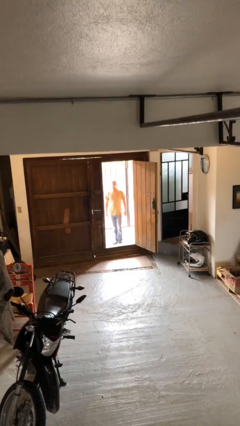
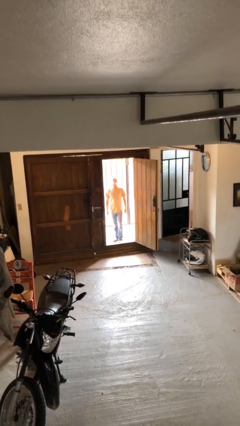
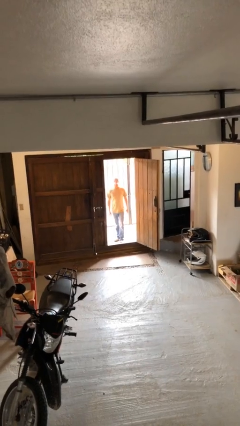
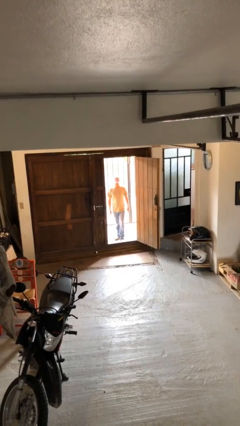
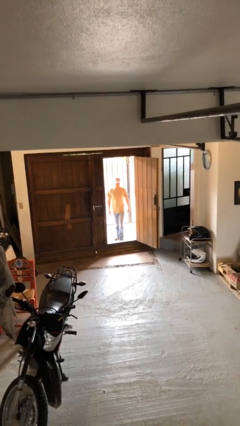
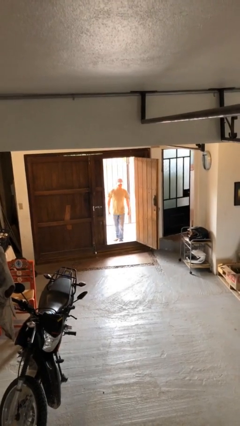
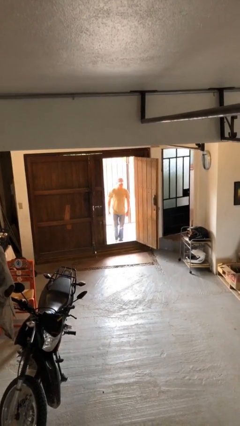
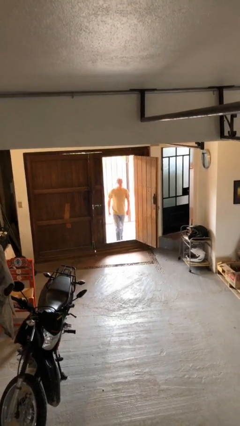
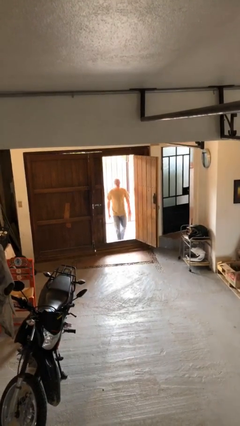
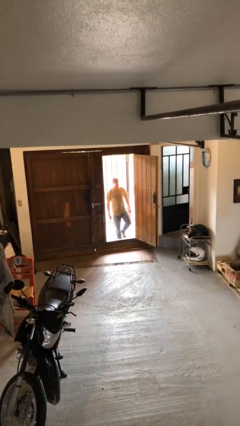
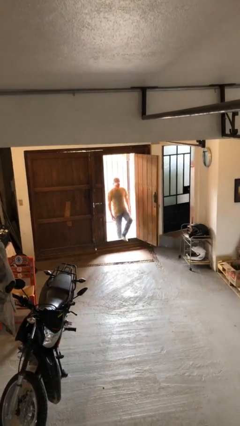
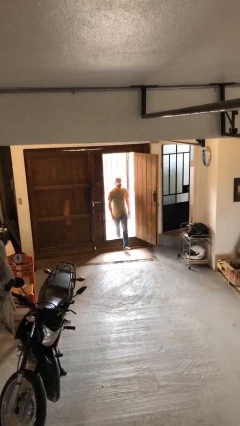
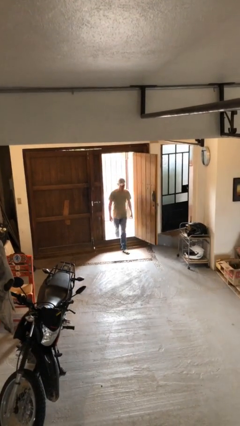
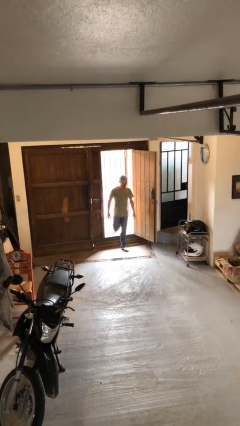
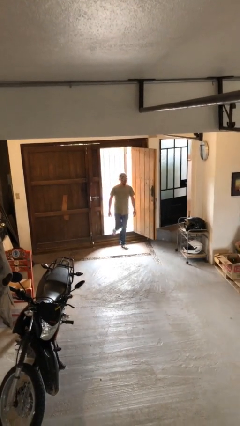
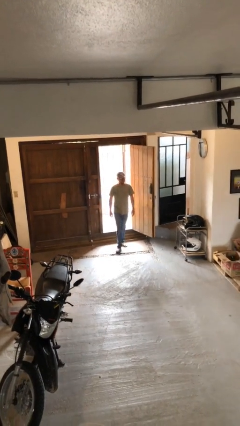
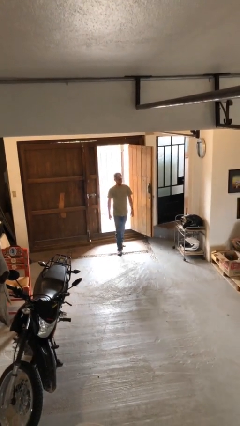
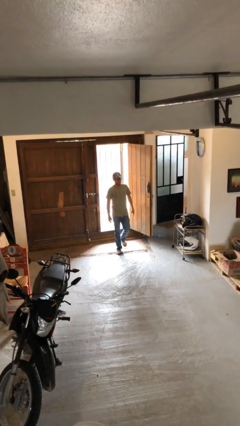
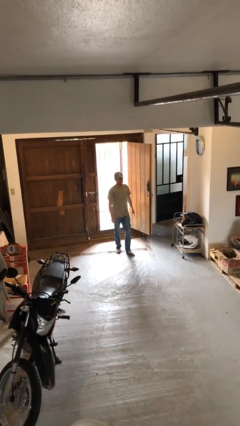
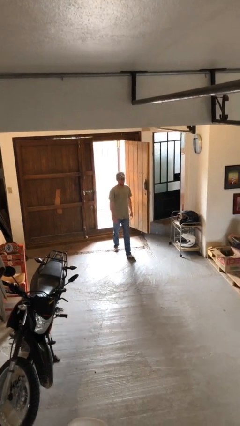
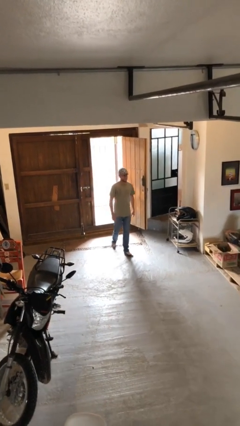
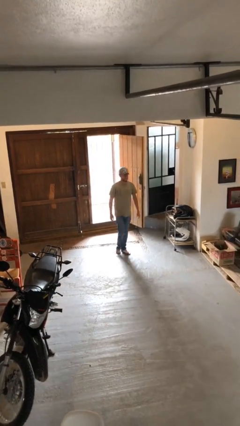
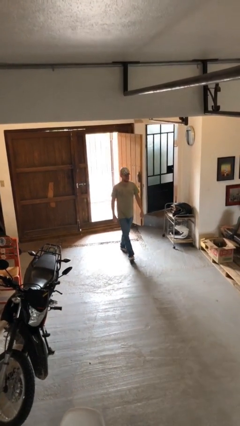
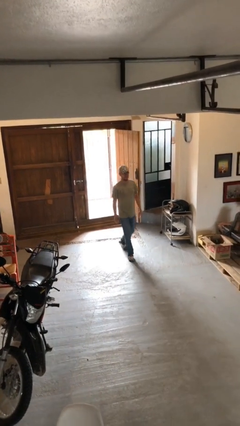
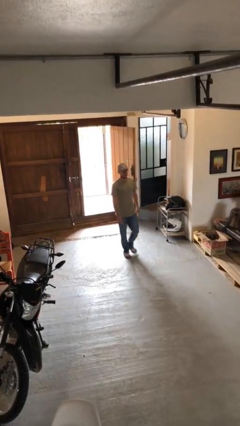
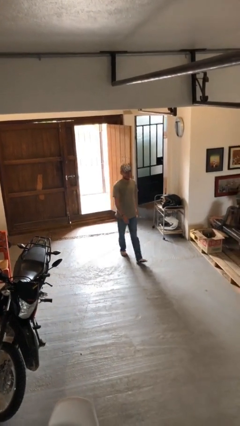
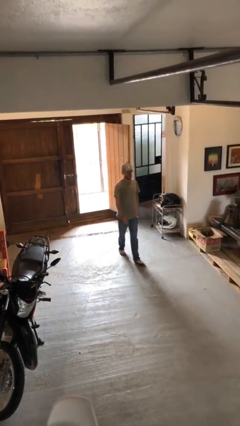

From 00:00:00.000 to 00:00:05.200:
person enters scene through structure

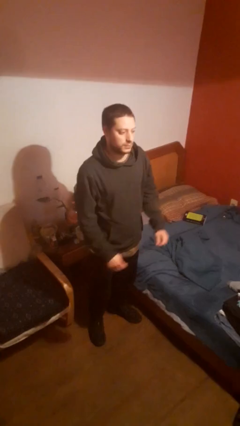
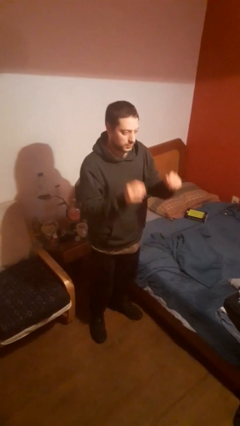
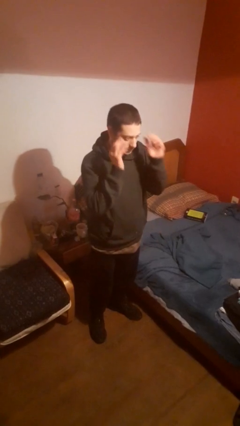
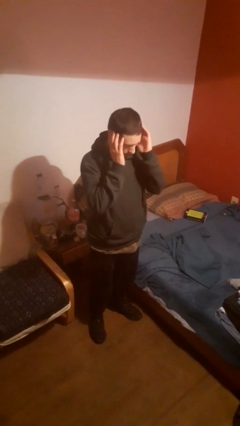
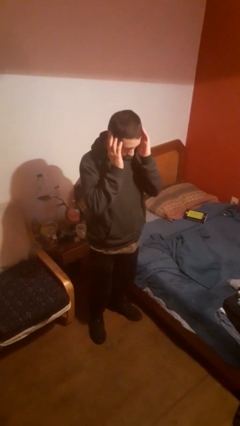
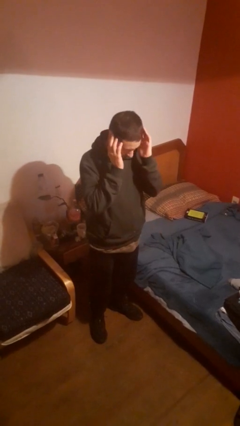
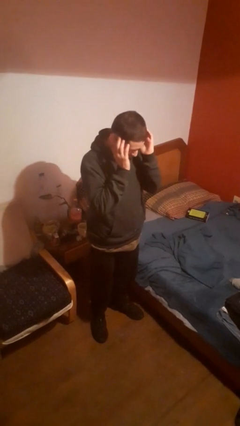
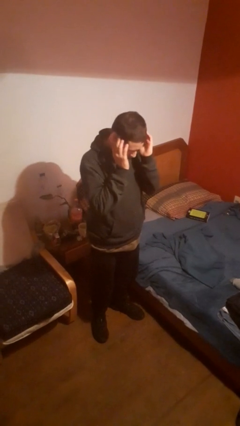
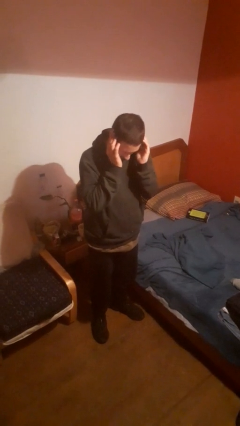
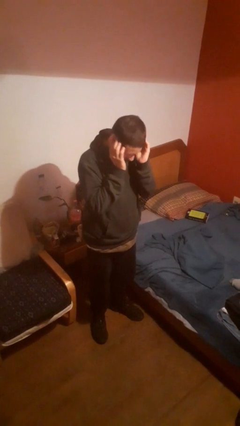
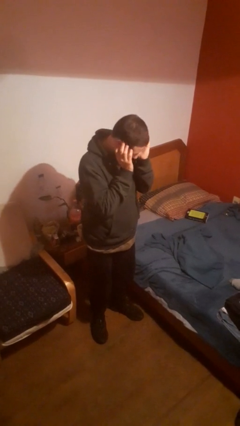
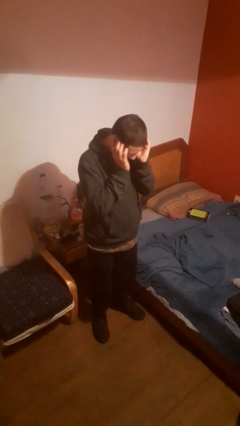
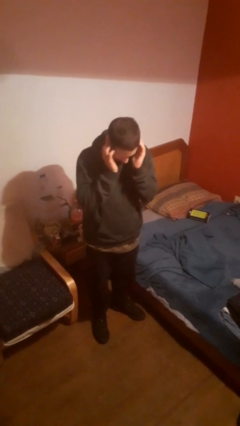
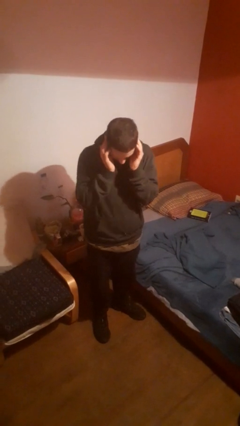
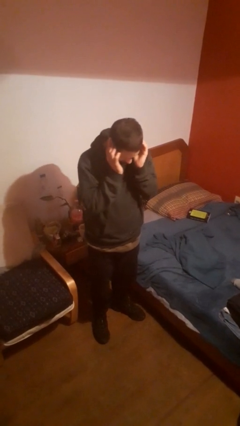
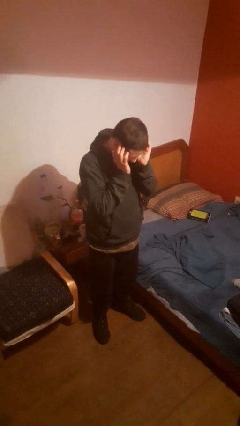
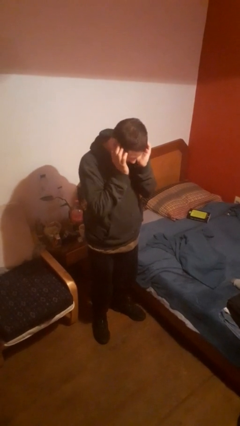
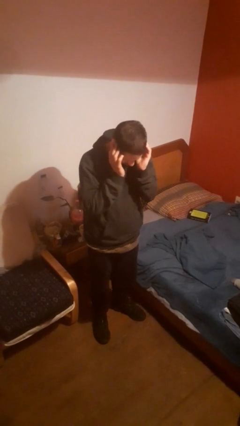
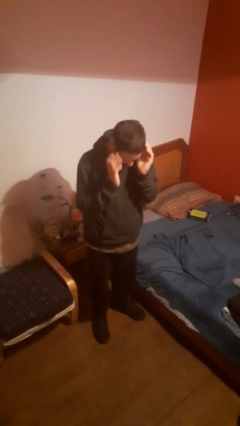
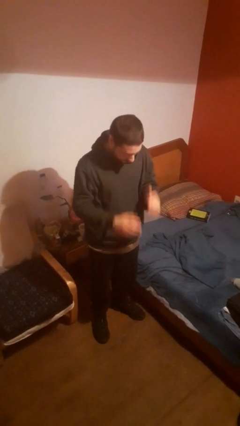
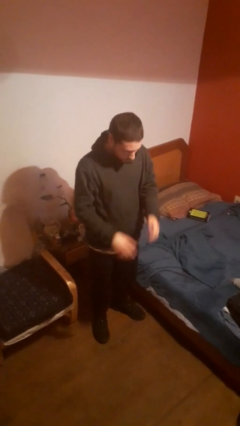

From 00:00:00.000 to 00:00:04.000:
person puts fingers in ear

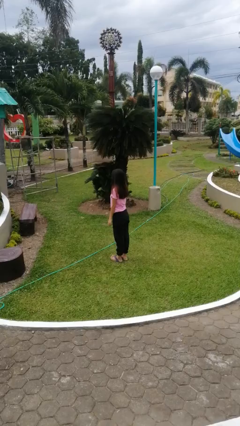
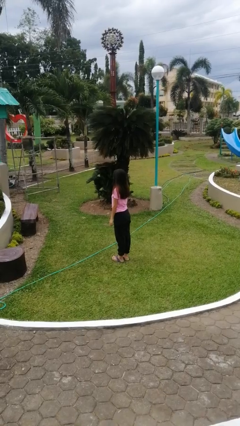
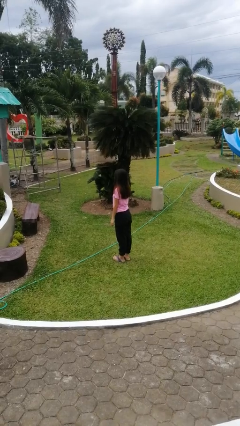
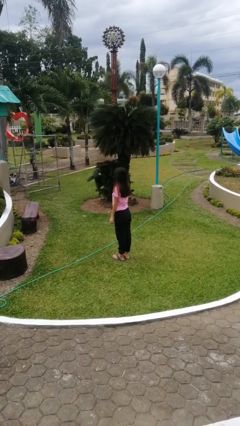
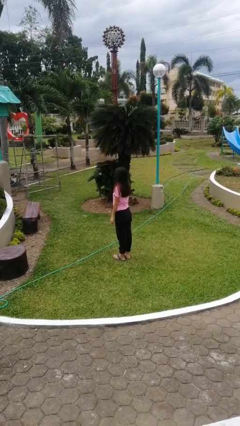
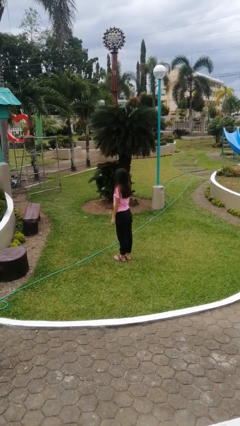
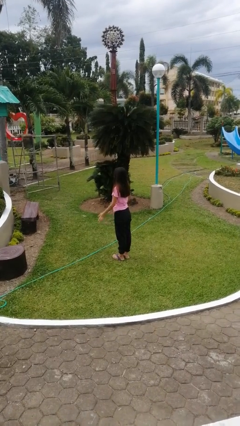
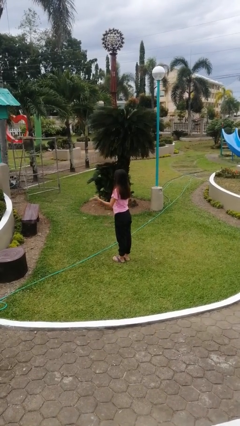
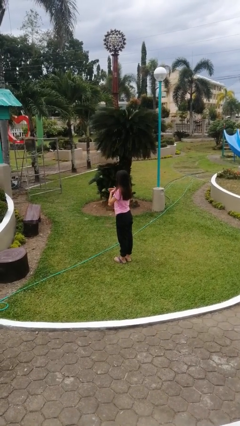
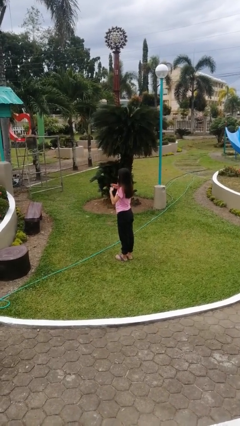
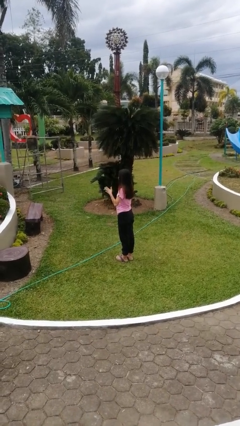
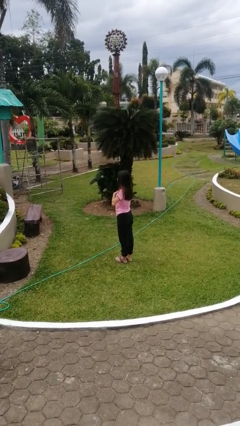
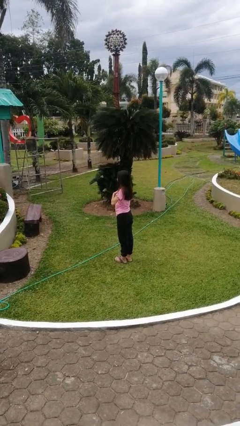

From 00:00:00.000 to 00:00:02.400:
person drums on chest

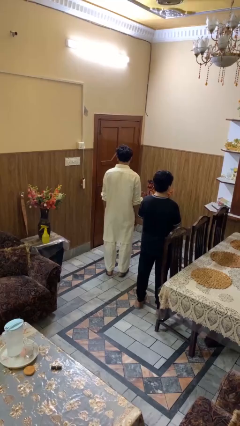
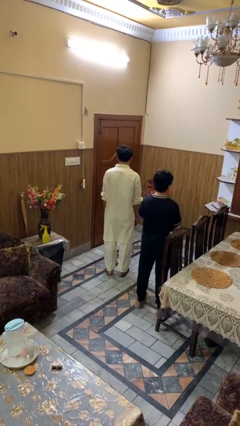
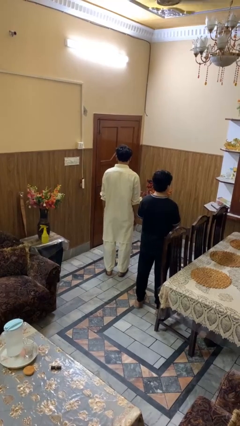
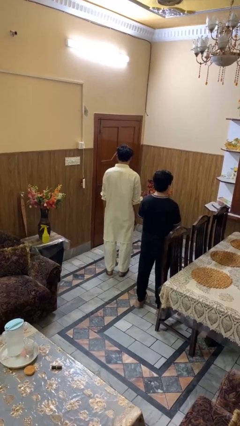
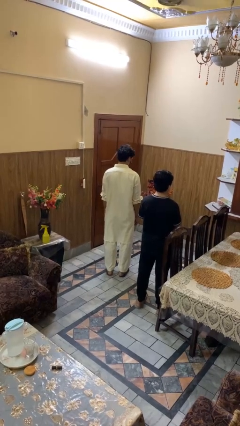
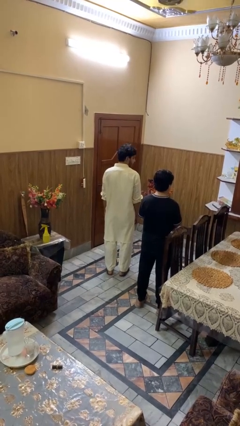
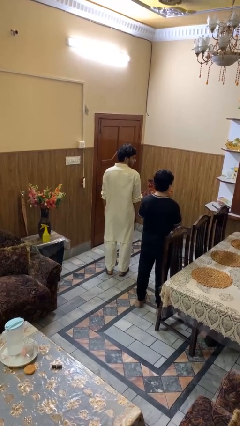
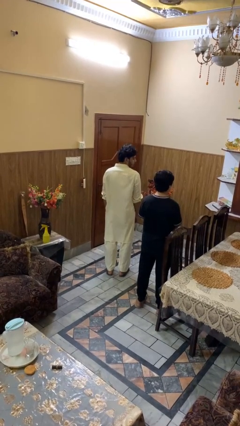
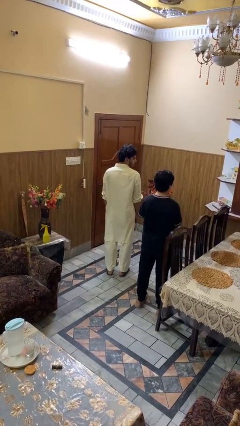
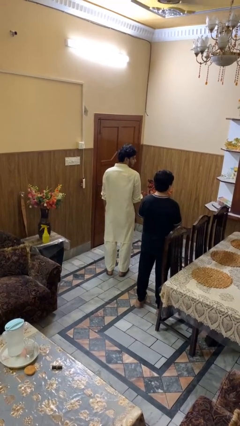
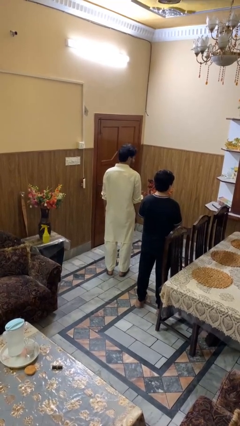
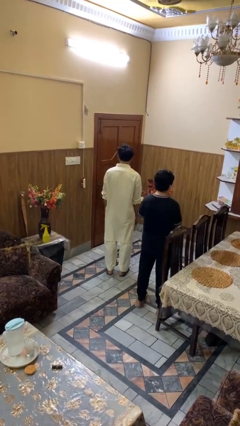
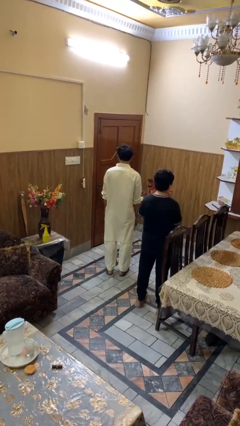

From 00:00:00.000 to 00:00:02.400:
person looks over shoulder

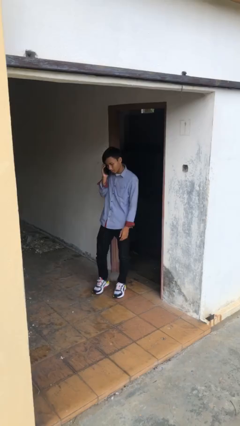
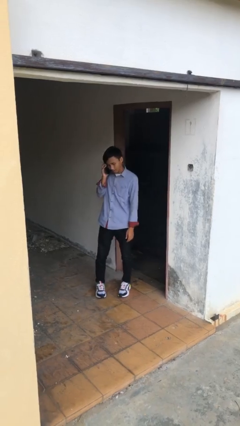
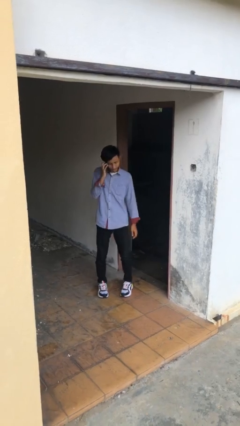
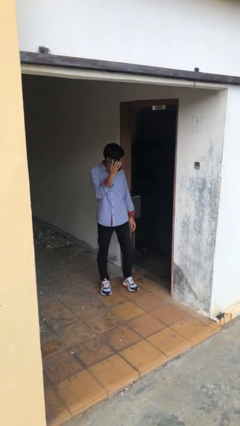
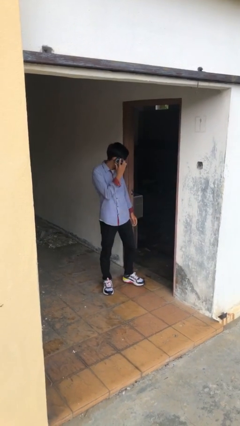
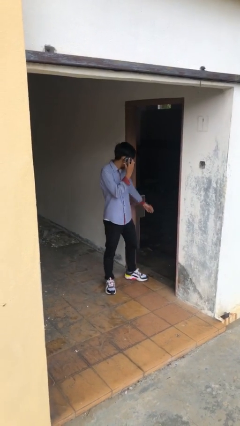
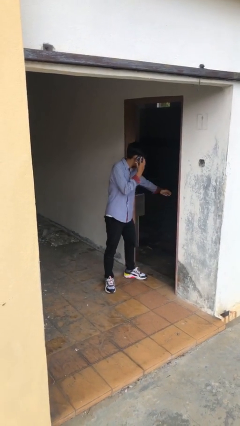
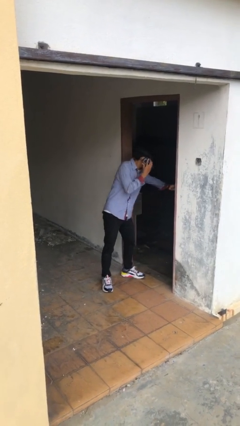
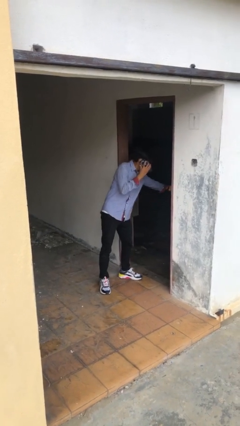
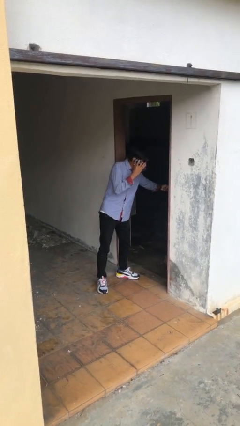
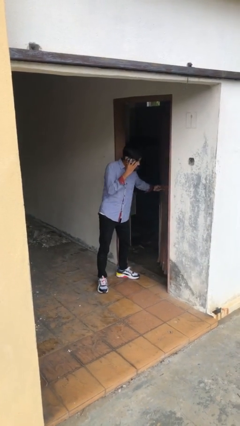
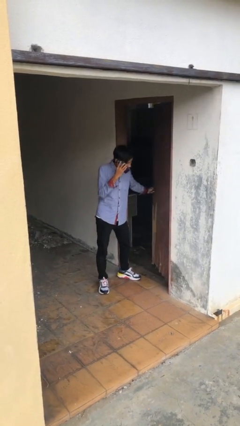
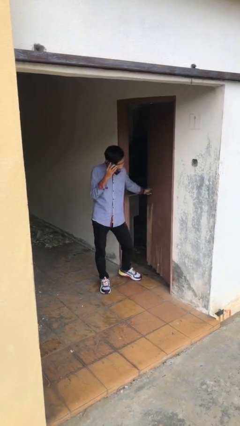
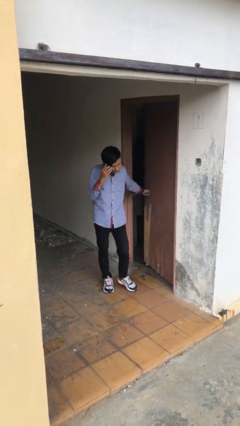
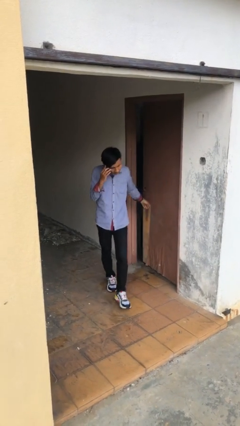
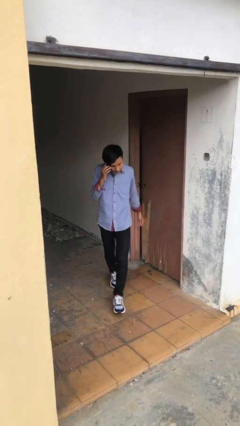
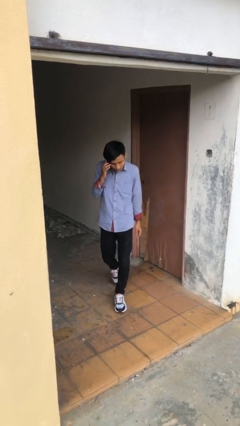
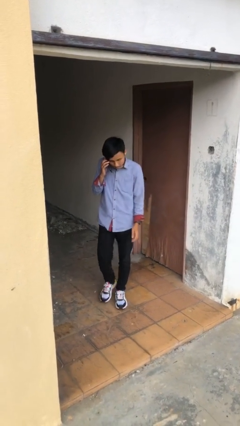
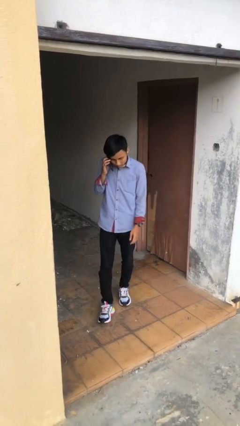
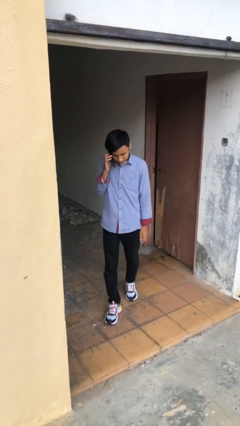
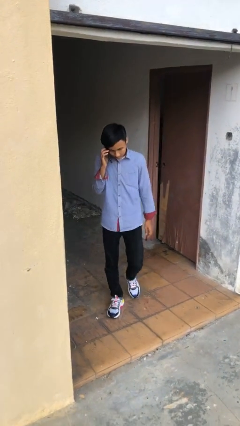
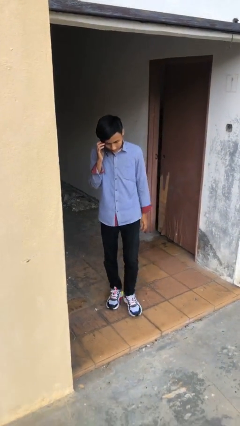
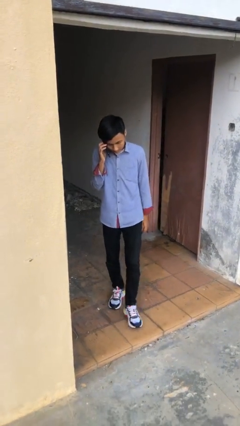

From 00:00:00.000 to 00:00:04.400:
person closes facility door
